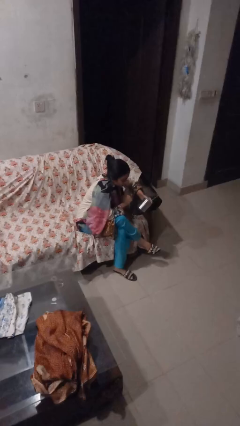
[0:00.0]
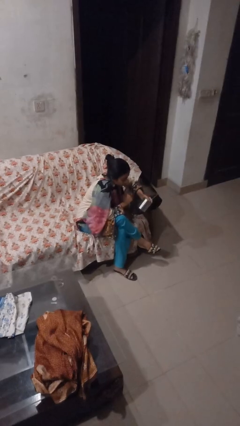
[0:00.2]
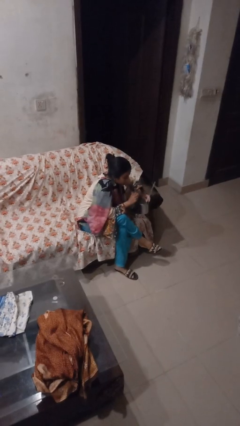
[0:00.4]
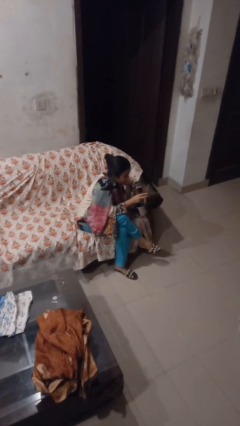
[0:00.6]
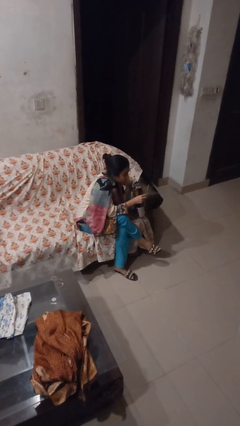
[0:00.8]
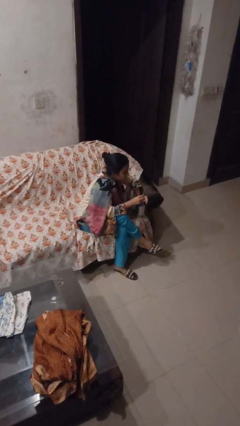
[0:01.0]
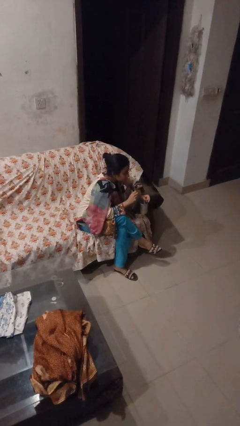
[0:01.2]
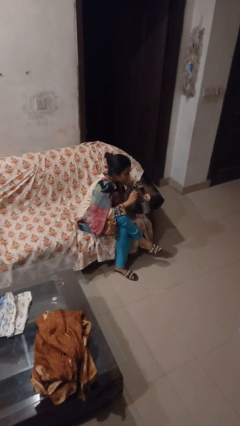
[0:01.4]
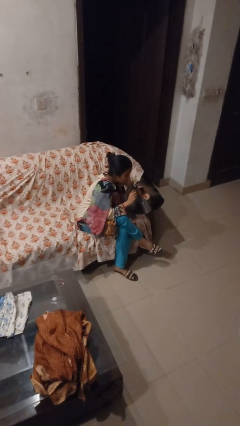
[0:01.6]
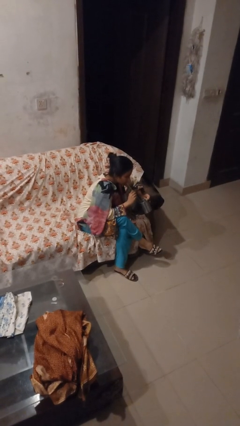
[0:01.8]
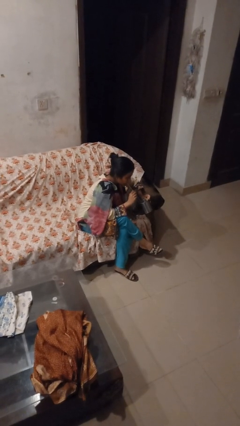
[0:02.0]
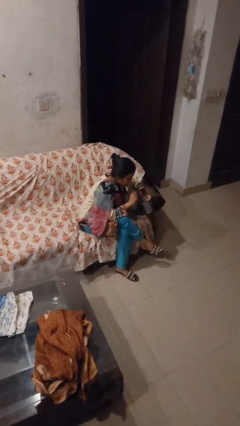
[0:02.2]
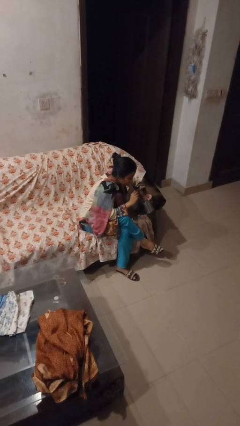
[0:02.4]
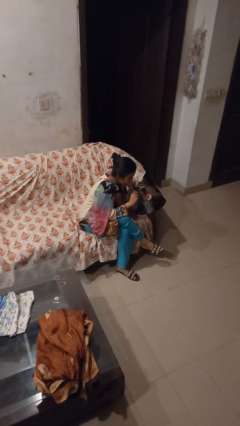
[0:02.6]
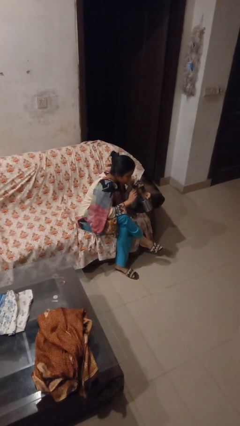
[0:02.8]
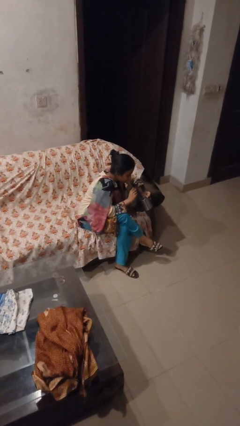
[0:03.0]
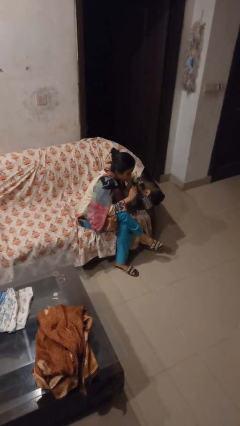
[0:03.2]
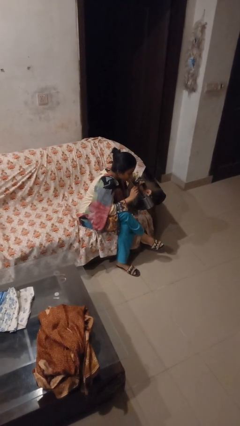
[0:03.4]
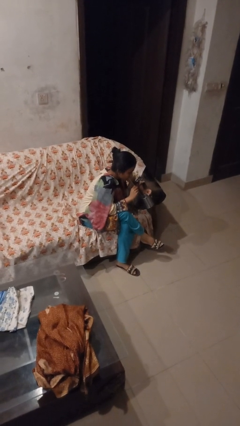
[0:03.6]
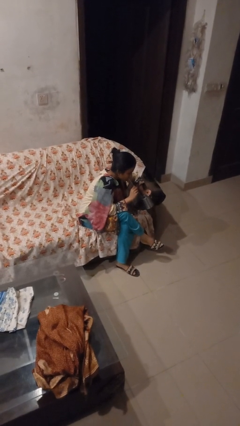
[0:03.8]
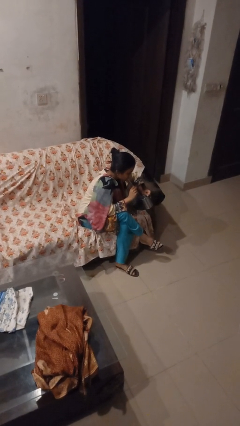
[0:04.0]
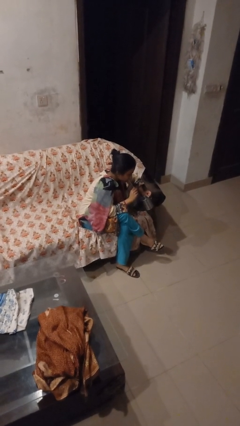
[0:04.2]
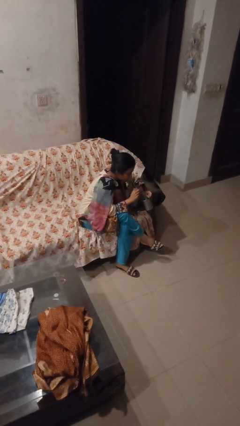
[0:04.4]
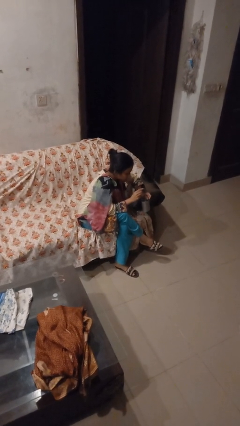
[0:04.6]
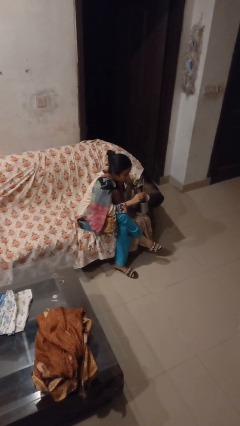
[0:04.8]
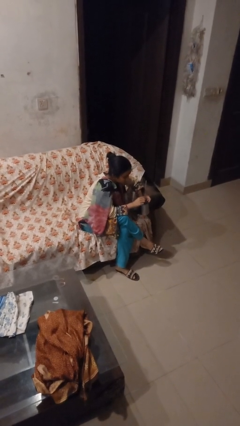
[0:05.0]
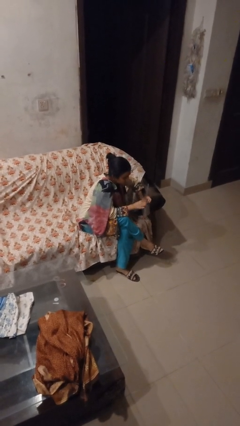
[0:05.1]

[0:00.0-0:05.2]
person drinks from straw

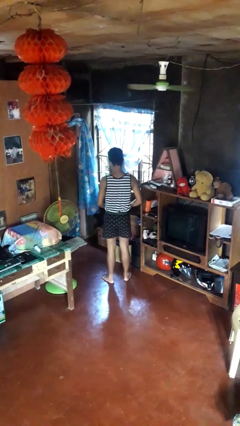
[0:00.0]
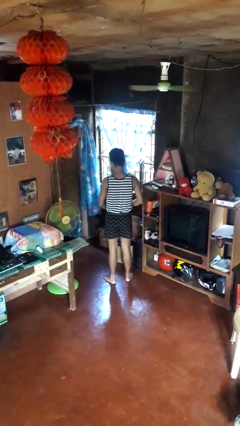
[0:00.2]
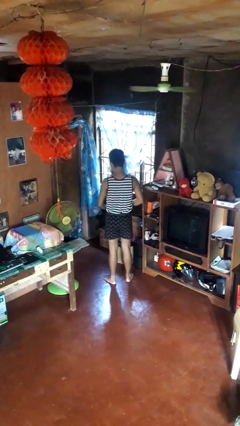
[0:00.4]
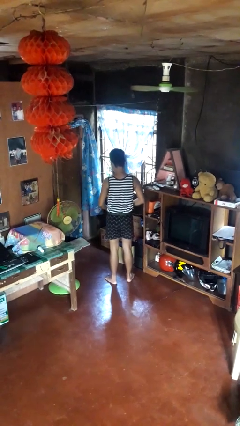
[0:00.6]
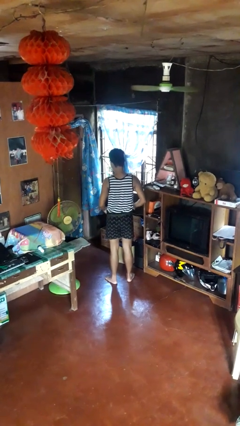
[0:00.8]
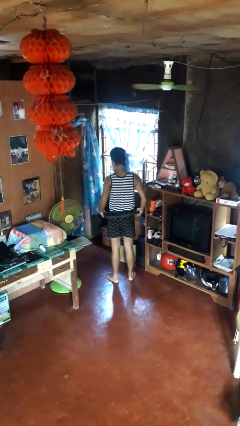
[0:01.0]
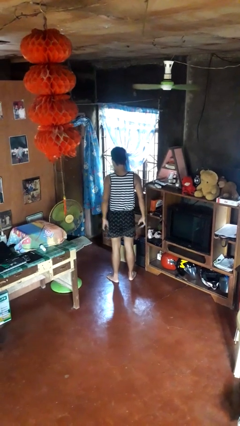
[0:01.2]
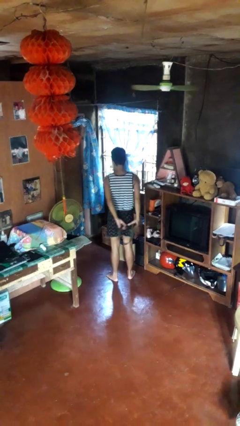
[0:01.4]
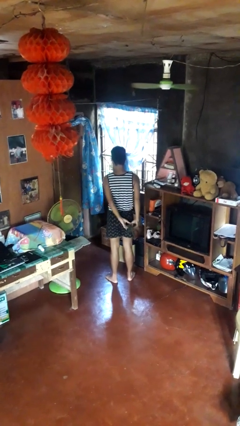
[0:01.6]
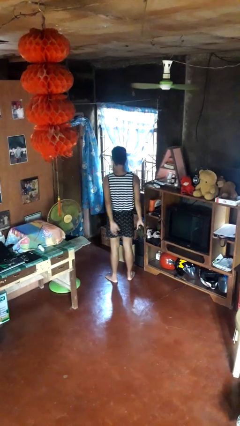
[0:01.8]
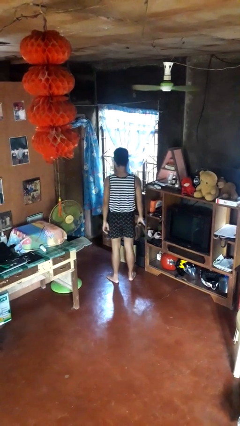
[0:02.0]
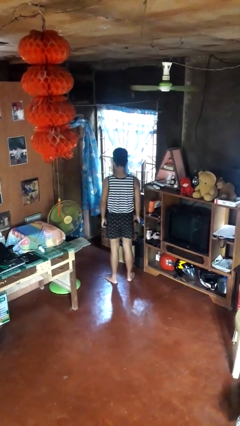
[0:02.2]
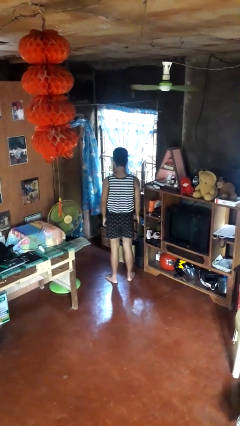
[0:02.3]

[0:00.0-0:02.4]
person takes off belt

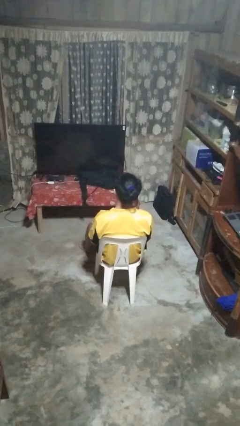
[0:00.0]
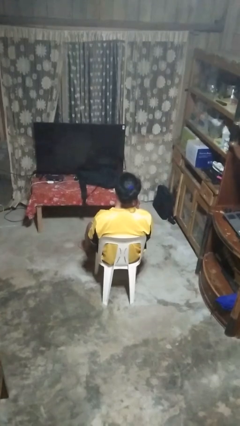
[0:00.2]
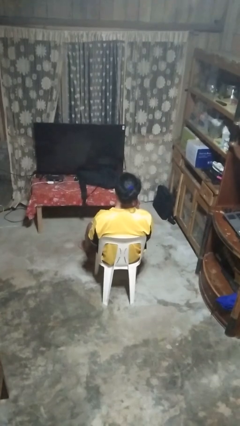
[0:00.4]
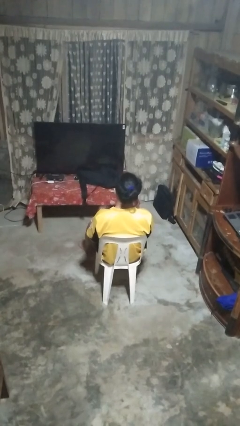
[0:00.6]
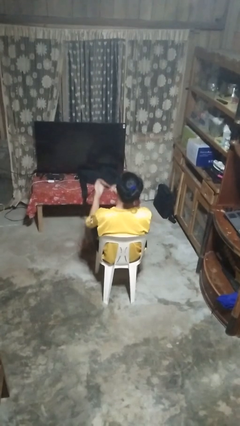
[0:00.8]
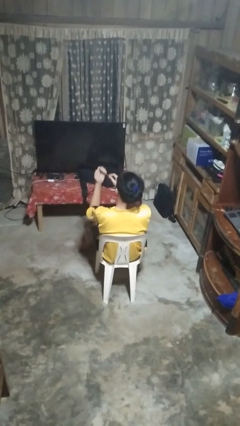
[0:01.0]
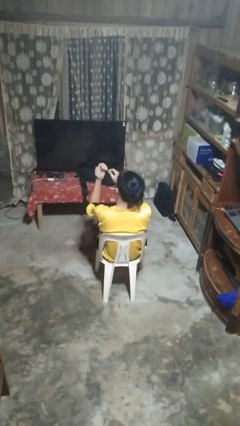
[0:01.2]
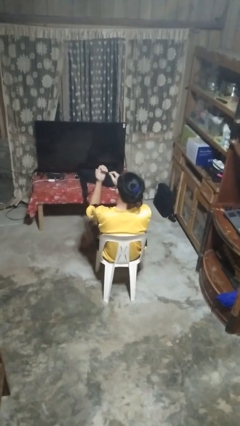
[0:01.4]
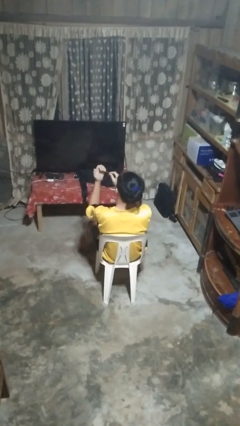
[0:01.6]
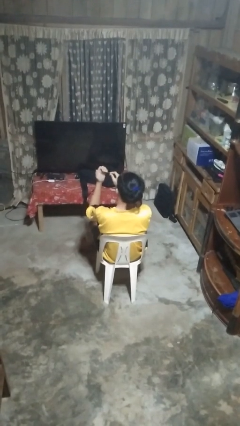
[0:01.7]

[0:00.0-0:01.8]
person files fingernails

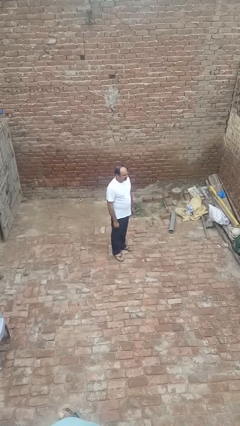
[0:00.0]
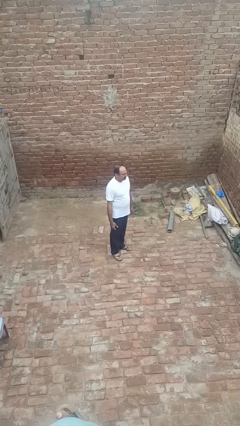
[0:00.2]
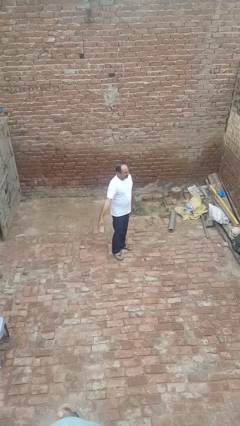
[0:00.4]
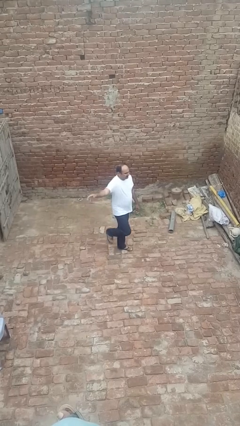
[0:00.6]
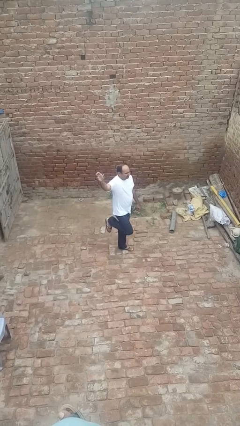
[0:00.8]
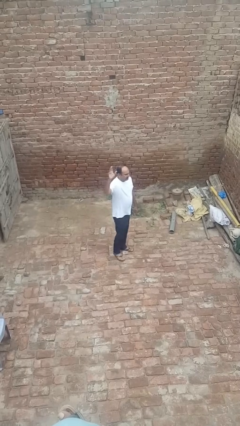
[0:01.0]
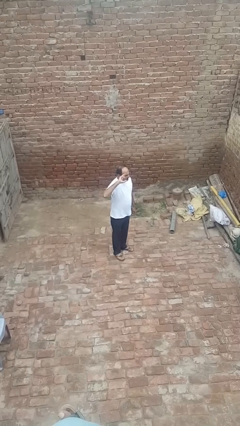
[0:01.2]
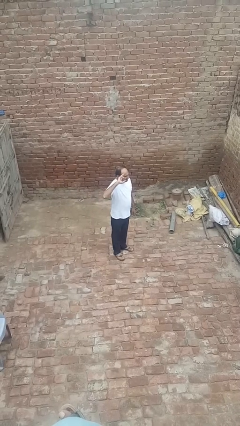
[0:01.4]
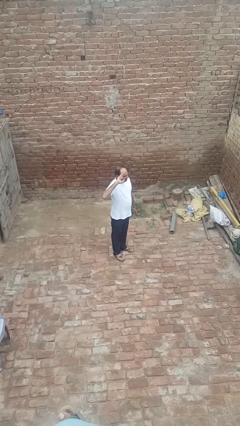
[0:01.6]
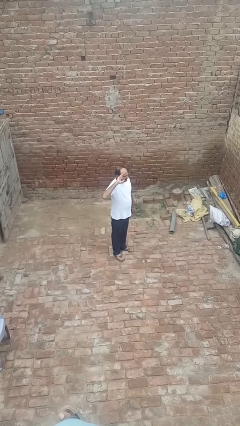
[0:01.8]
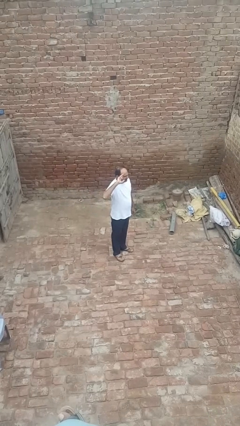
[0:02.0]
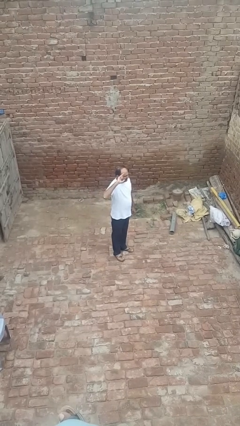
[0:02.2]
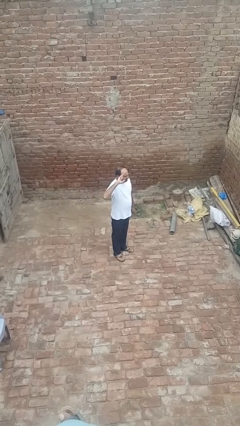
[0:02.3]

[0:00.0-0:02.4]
person salutes

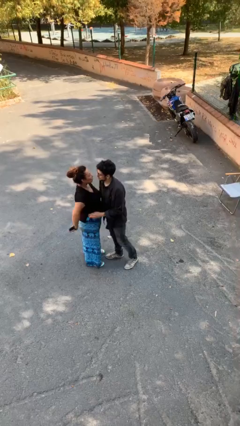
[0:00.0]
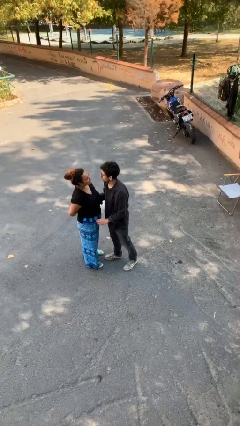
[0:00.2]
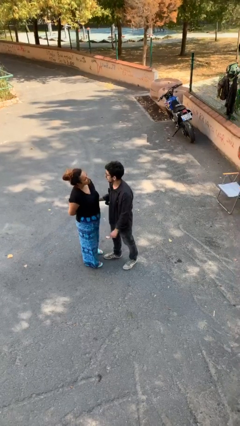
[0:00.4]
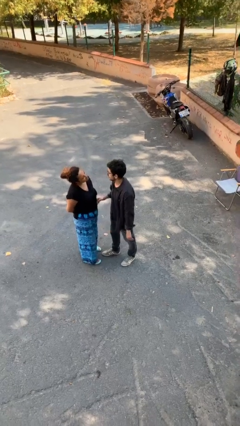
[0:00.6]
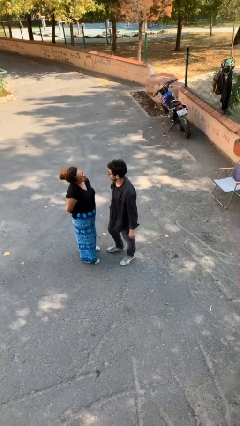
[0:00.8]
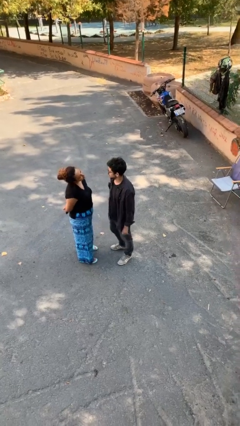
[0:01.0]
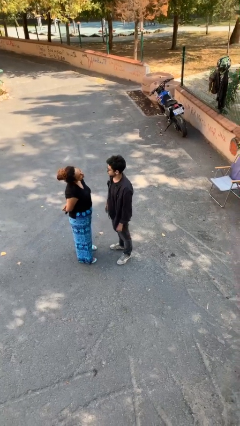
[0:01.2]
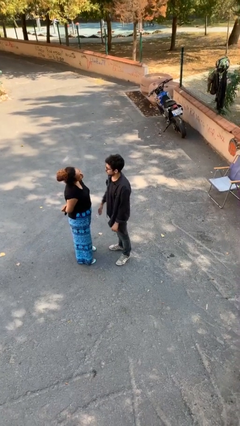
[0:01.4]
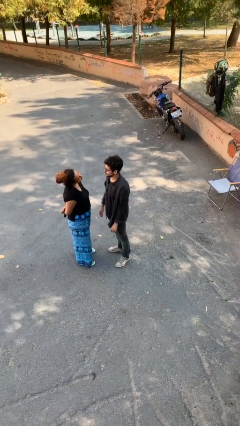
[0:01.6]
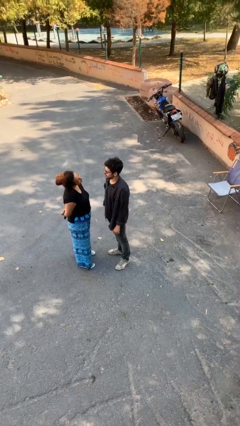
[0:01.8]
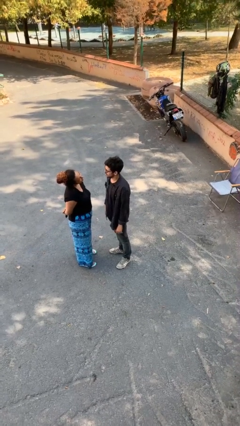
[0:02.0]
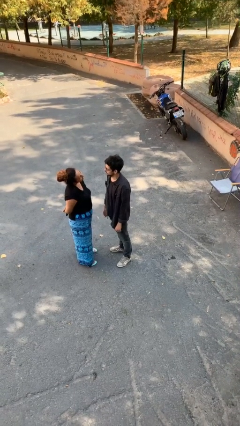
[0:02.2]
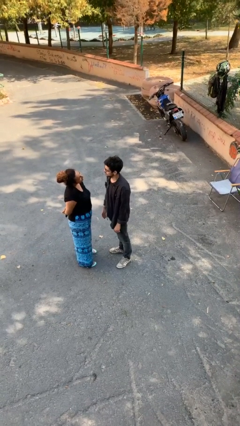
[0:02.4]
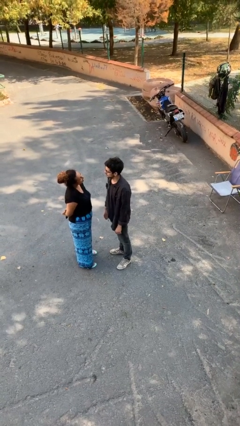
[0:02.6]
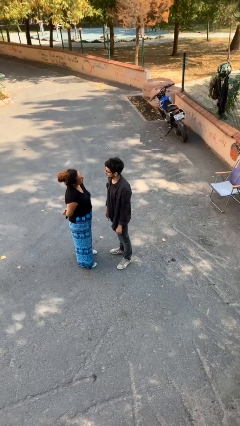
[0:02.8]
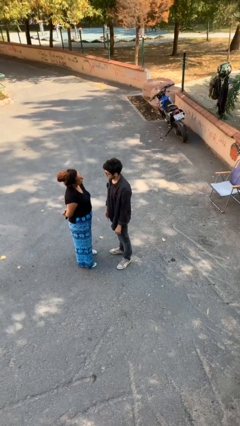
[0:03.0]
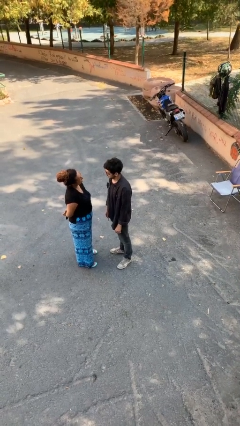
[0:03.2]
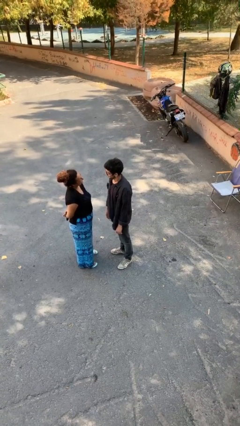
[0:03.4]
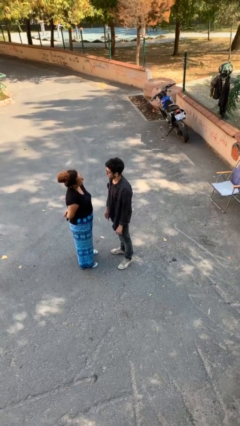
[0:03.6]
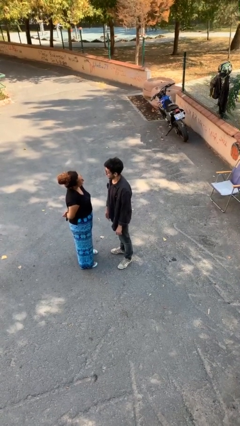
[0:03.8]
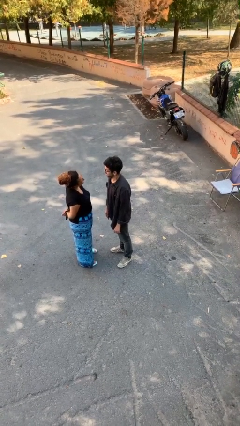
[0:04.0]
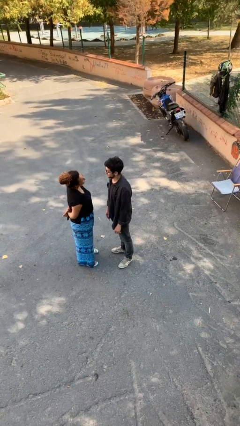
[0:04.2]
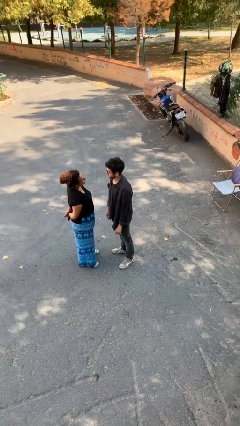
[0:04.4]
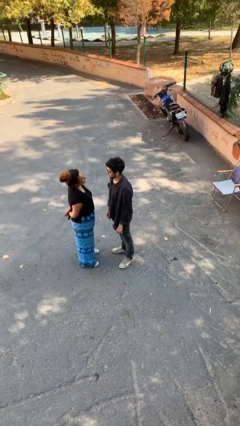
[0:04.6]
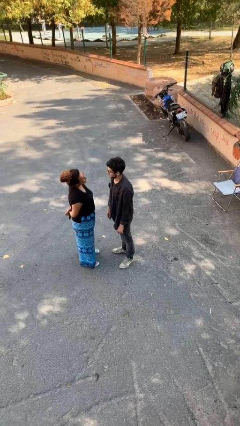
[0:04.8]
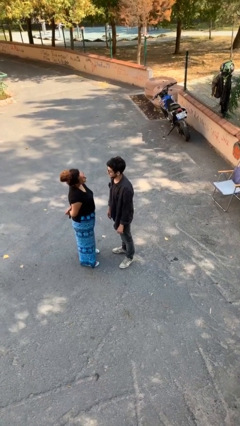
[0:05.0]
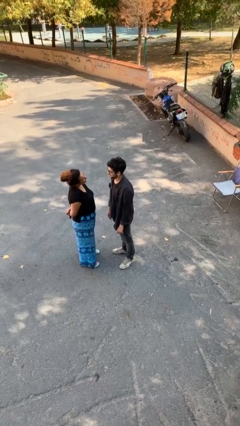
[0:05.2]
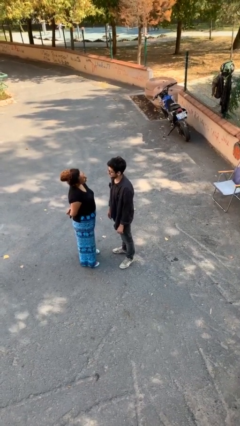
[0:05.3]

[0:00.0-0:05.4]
person talks to person

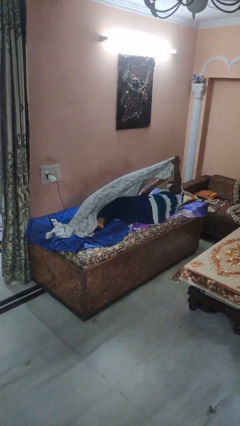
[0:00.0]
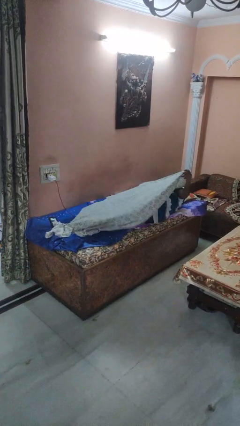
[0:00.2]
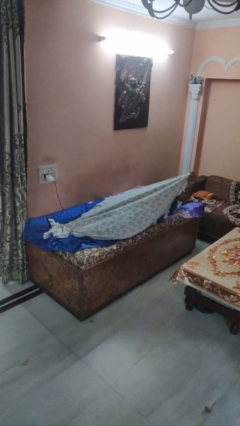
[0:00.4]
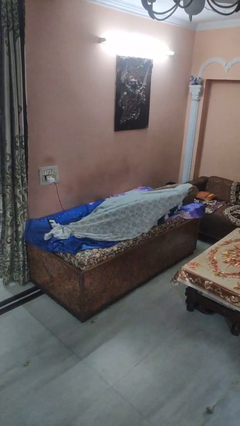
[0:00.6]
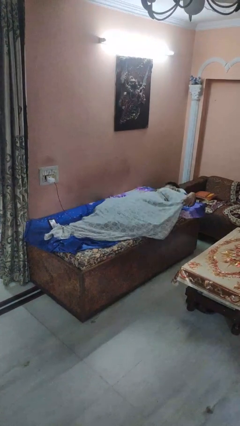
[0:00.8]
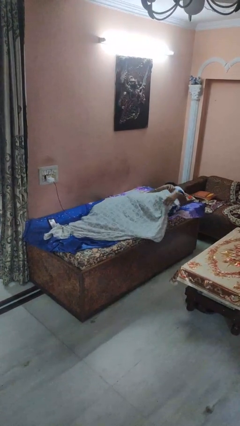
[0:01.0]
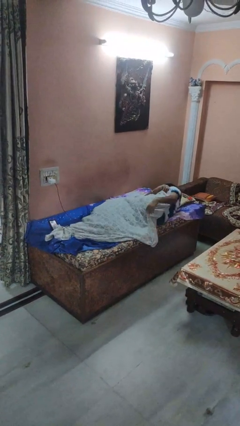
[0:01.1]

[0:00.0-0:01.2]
person covers with bedsheets
